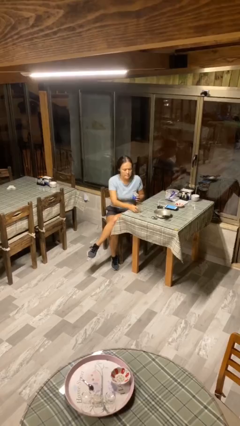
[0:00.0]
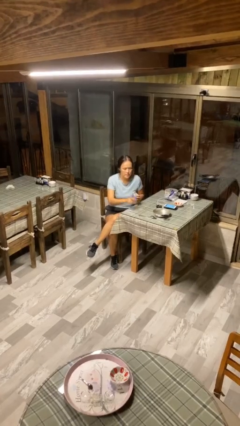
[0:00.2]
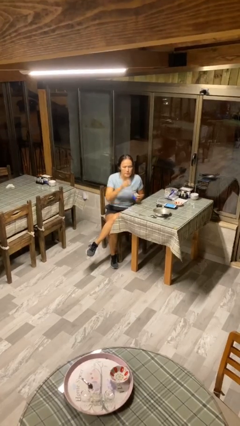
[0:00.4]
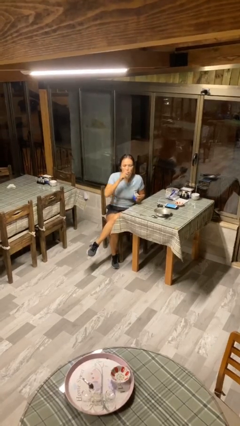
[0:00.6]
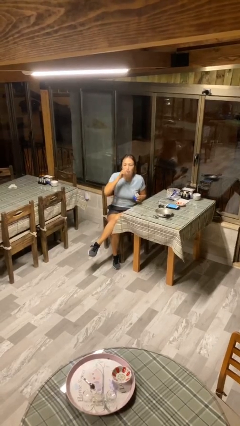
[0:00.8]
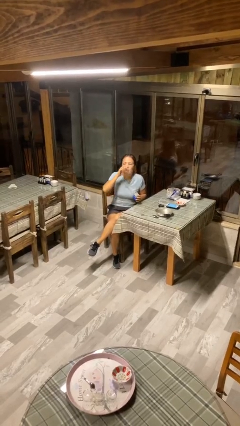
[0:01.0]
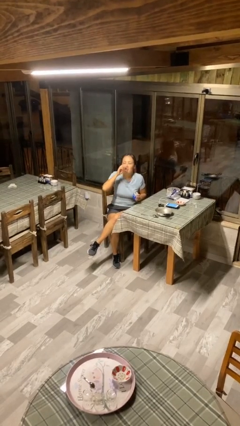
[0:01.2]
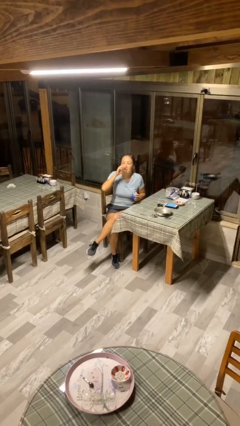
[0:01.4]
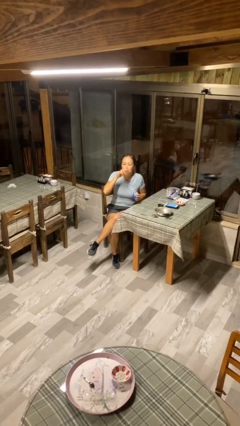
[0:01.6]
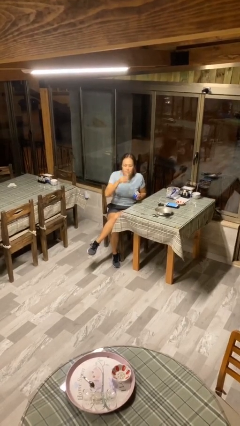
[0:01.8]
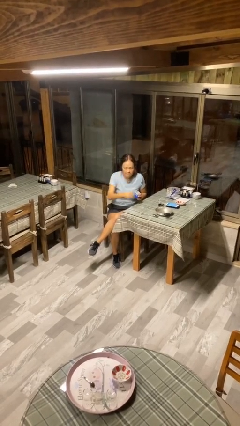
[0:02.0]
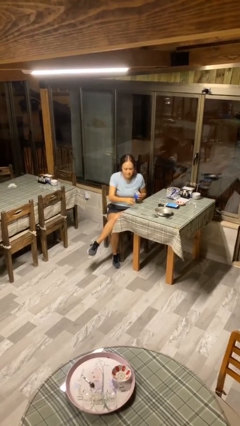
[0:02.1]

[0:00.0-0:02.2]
person drinks from cup

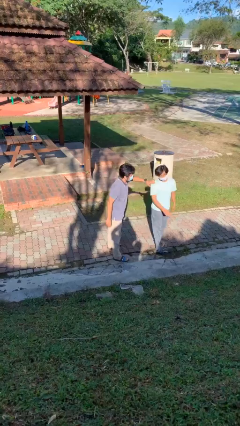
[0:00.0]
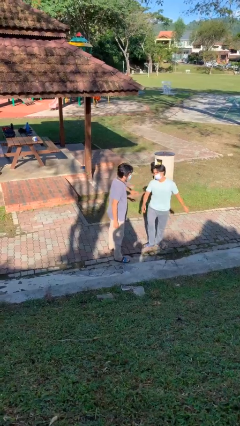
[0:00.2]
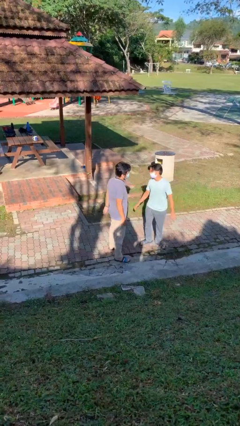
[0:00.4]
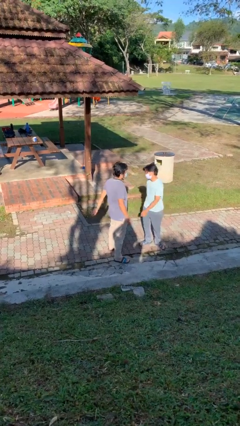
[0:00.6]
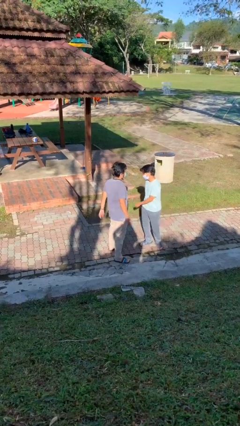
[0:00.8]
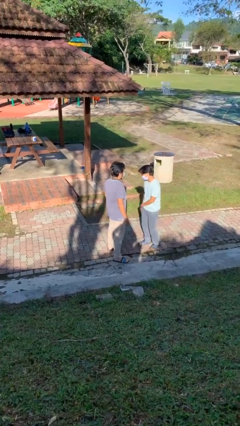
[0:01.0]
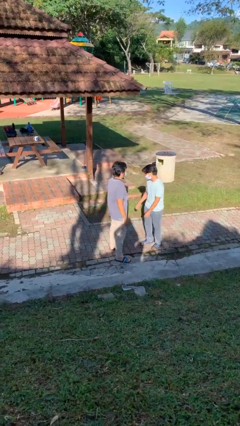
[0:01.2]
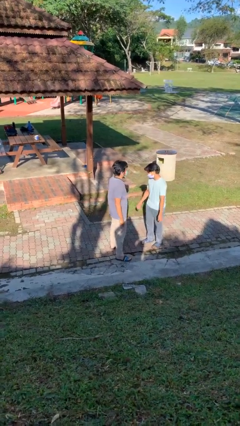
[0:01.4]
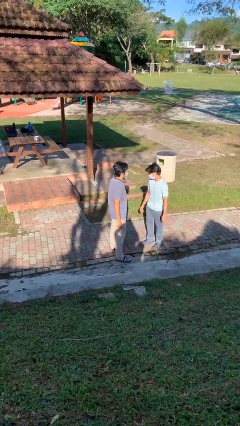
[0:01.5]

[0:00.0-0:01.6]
person spins person around

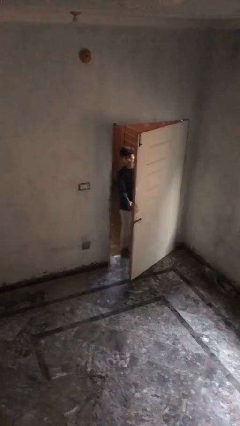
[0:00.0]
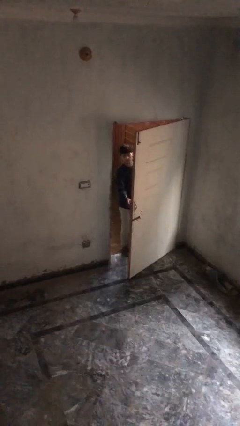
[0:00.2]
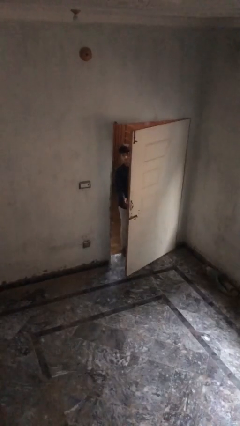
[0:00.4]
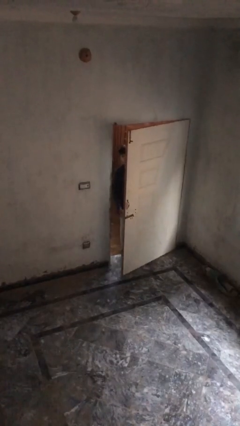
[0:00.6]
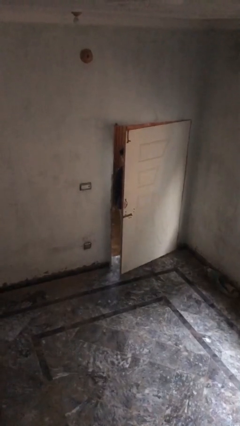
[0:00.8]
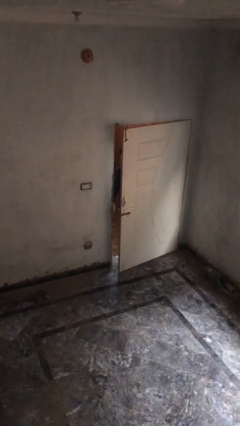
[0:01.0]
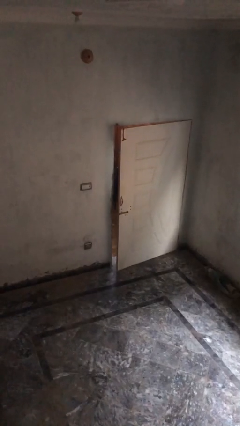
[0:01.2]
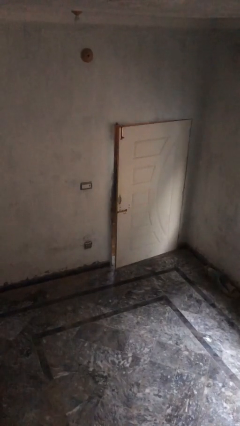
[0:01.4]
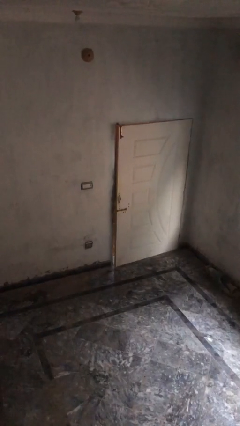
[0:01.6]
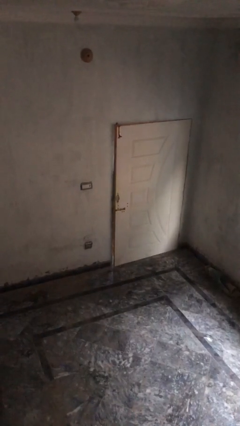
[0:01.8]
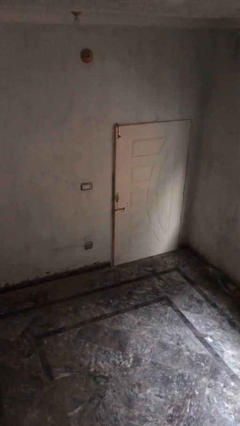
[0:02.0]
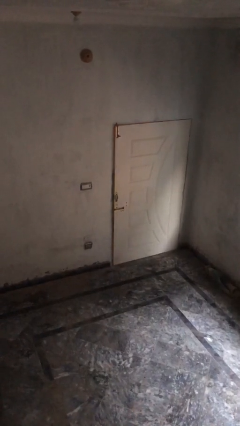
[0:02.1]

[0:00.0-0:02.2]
person closes facility door

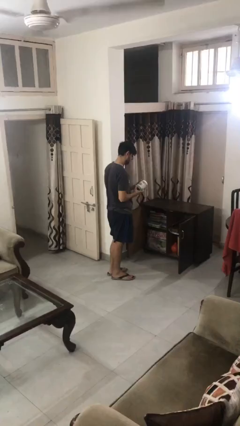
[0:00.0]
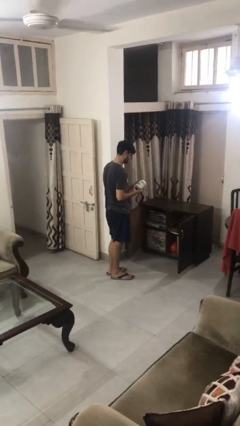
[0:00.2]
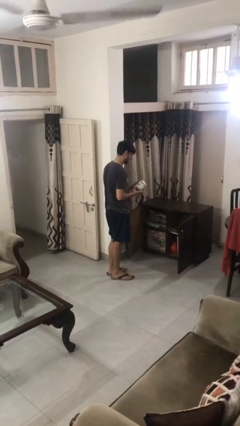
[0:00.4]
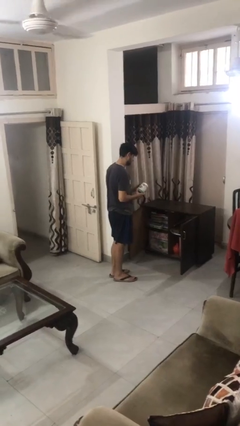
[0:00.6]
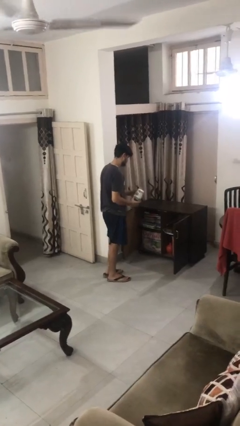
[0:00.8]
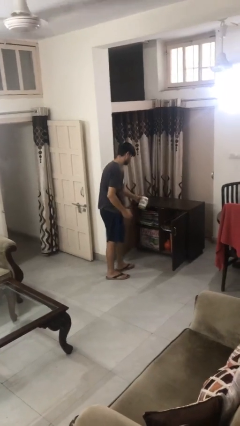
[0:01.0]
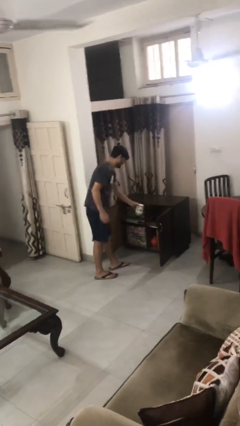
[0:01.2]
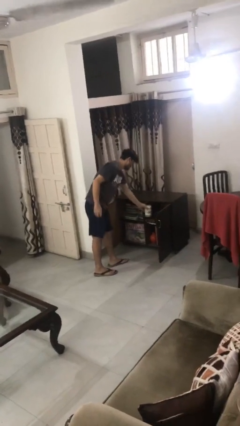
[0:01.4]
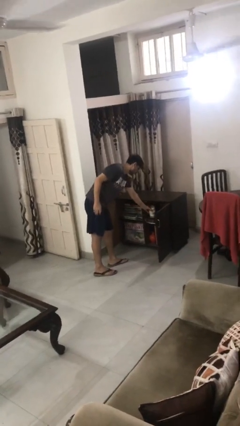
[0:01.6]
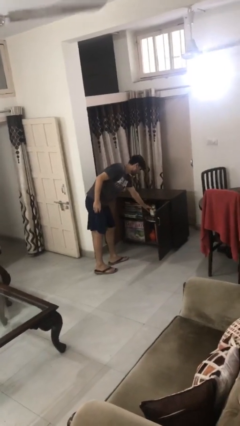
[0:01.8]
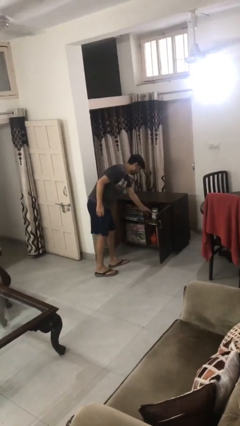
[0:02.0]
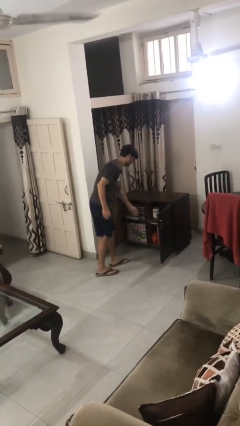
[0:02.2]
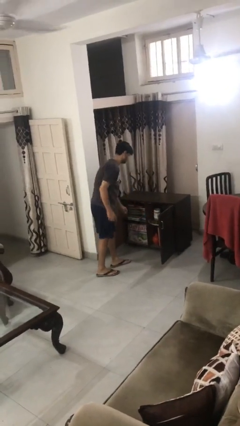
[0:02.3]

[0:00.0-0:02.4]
person puts down object into cabinet

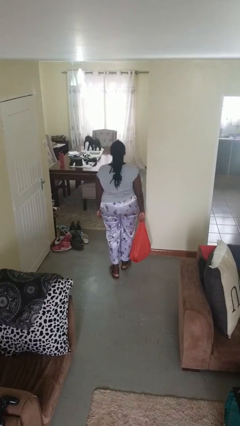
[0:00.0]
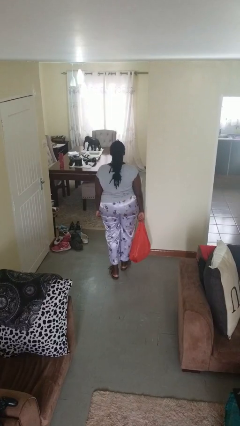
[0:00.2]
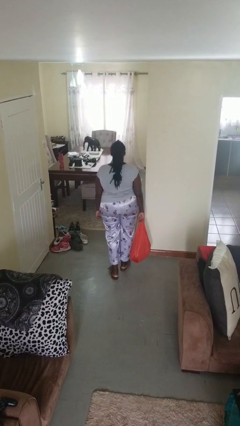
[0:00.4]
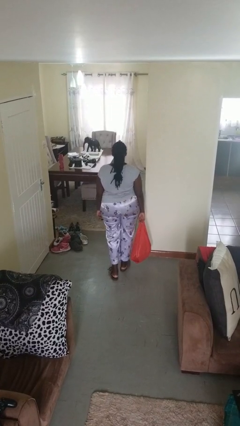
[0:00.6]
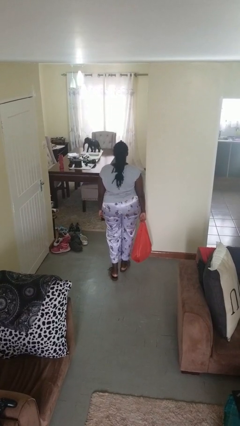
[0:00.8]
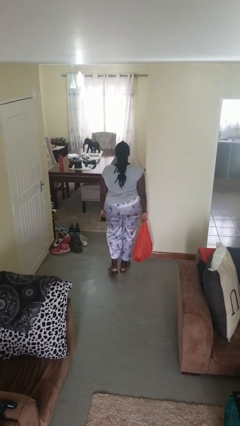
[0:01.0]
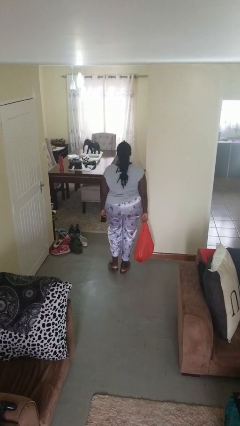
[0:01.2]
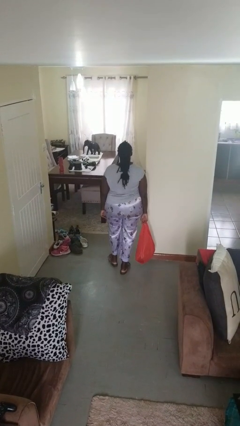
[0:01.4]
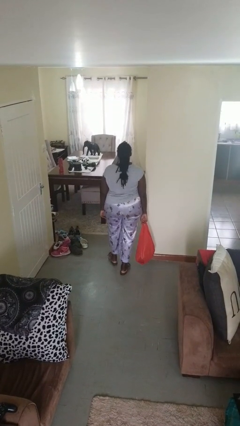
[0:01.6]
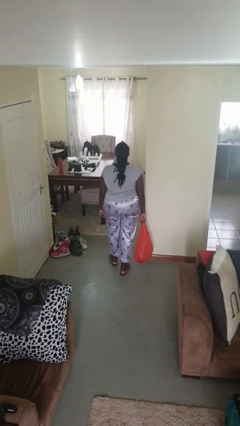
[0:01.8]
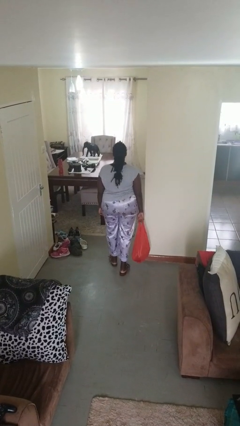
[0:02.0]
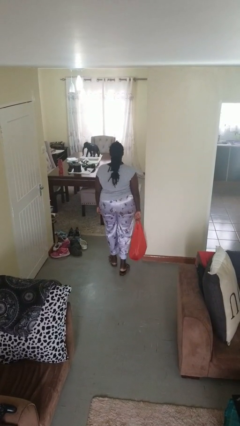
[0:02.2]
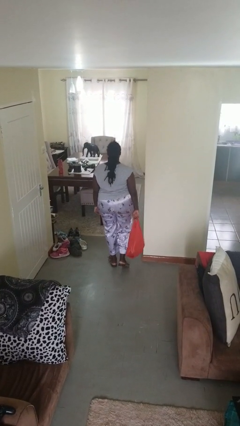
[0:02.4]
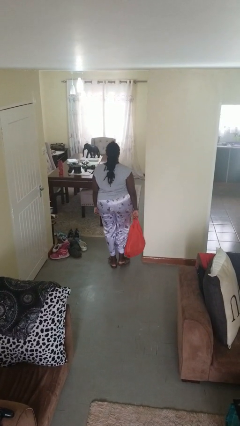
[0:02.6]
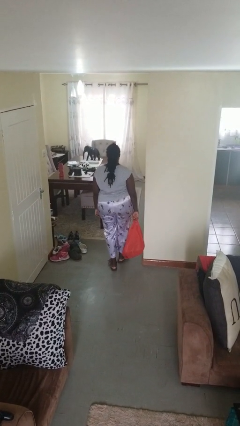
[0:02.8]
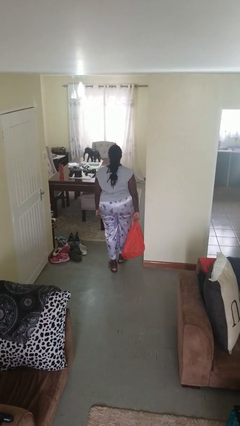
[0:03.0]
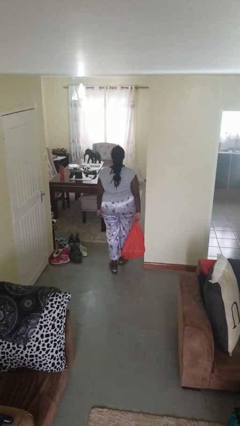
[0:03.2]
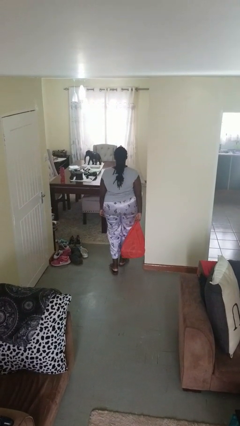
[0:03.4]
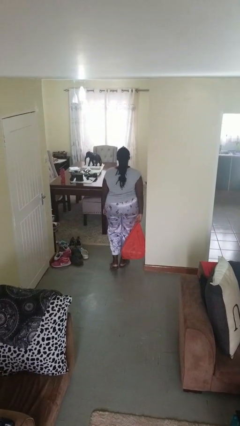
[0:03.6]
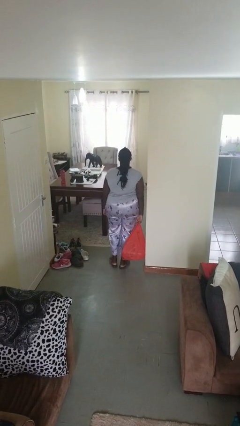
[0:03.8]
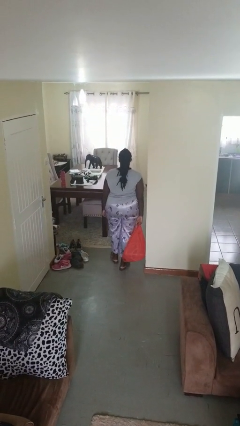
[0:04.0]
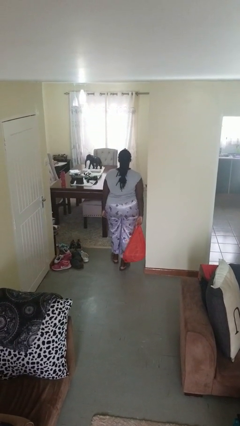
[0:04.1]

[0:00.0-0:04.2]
person carries groceries

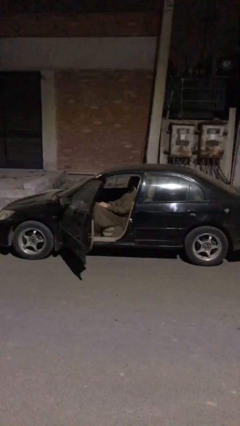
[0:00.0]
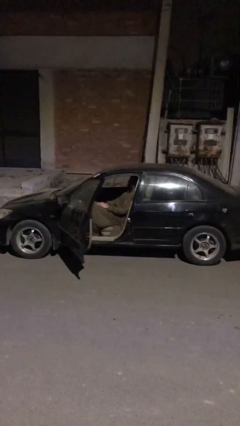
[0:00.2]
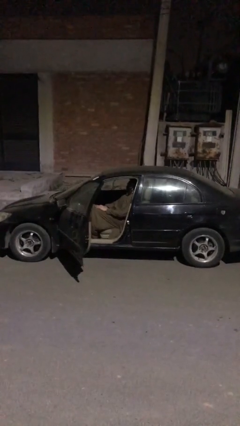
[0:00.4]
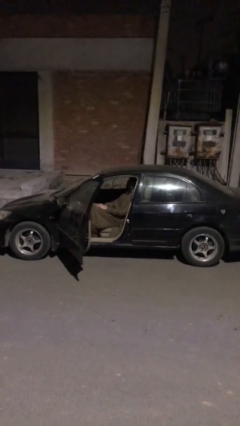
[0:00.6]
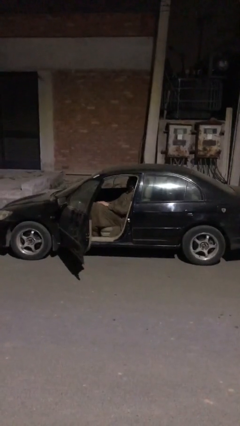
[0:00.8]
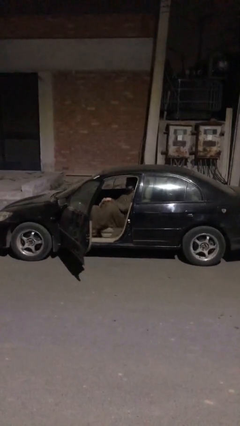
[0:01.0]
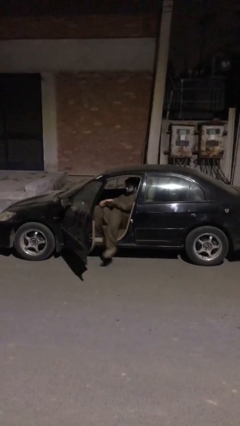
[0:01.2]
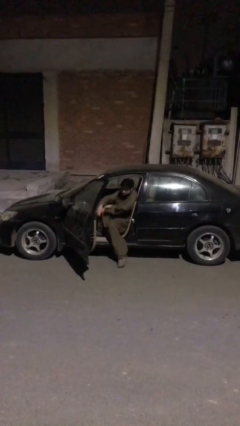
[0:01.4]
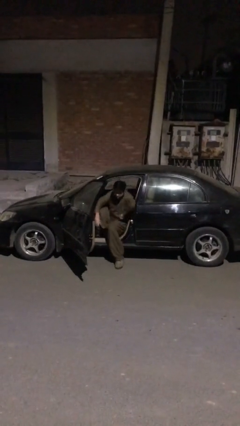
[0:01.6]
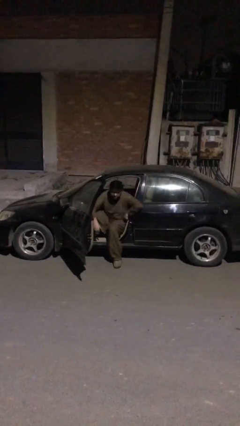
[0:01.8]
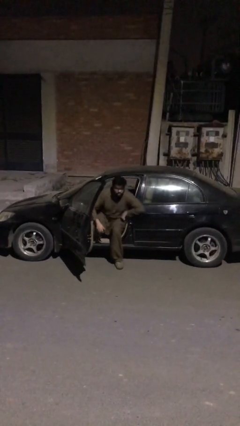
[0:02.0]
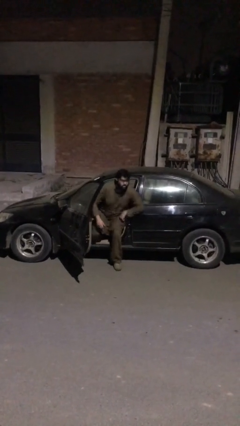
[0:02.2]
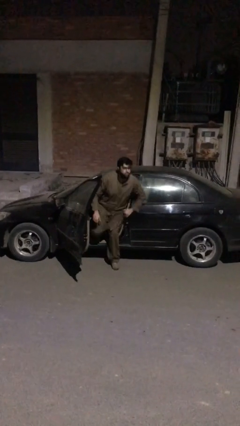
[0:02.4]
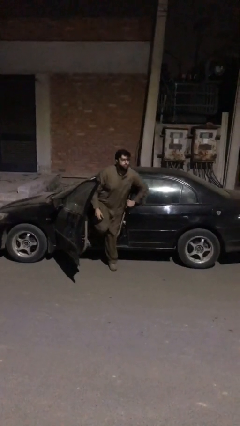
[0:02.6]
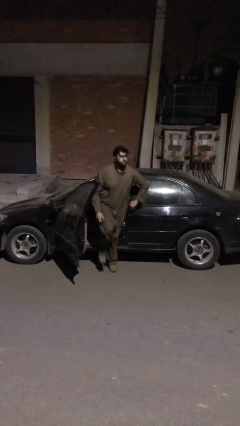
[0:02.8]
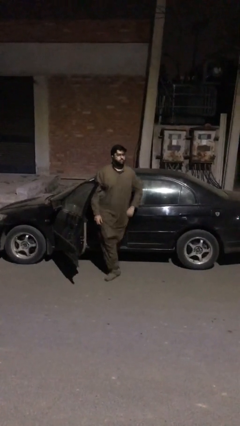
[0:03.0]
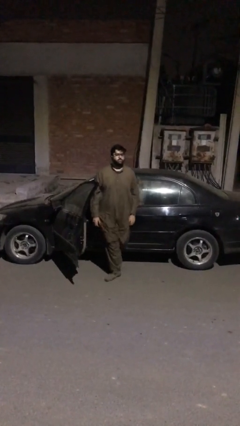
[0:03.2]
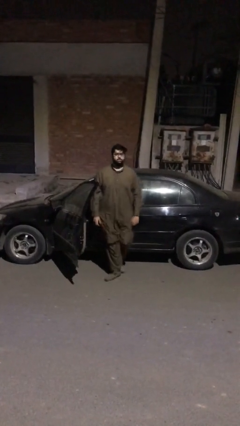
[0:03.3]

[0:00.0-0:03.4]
person exits car

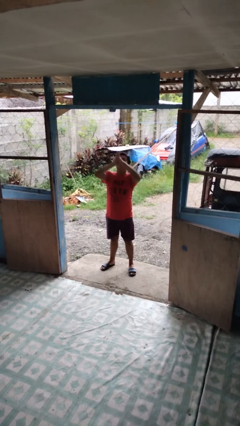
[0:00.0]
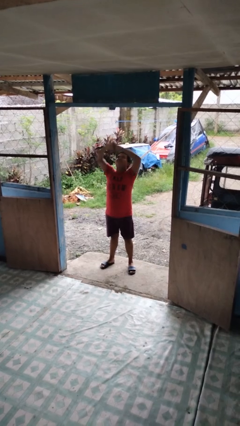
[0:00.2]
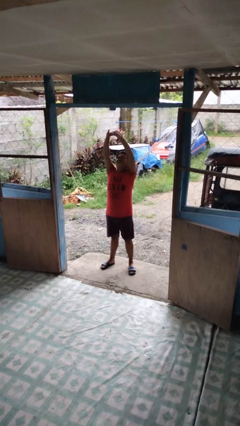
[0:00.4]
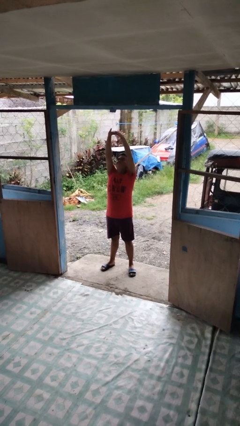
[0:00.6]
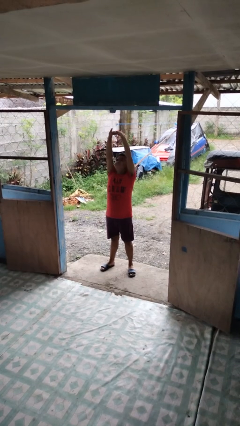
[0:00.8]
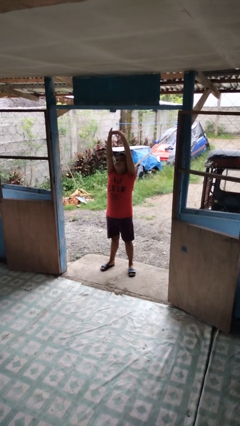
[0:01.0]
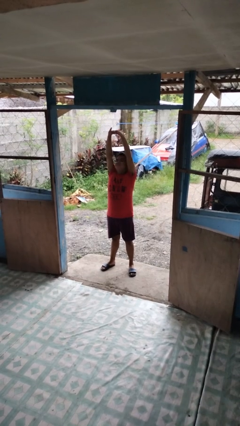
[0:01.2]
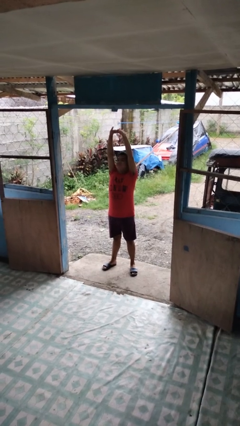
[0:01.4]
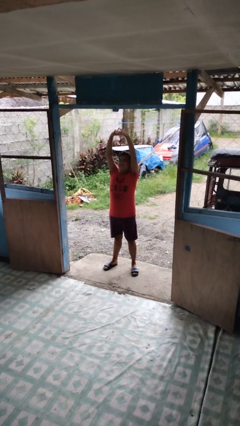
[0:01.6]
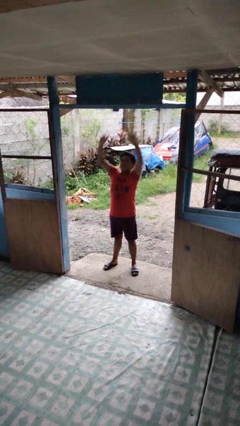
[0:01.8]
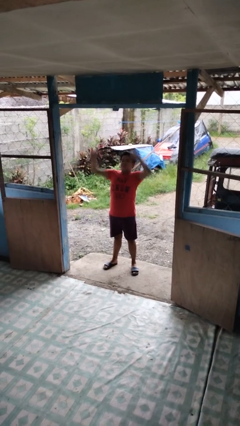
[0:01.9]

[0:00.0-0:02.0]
person stretches arms over head
